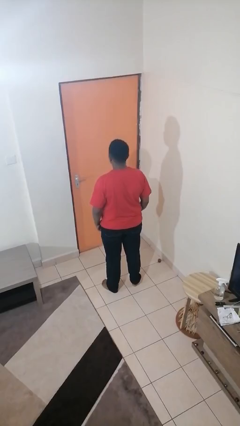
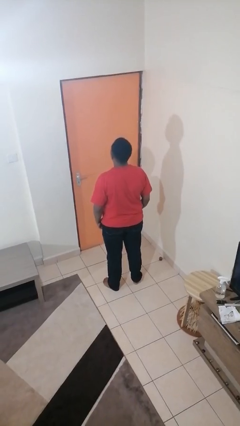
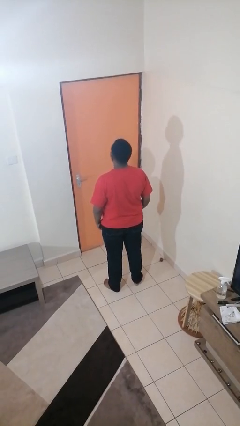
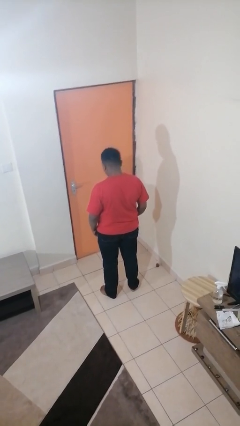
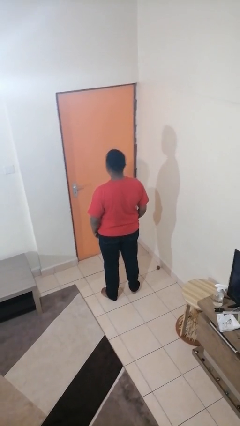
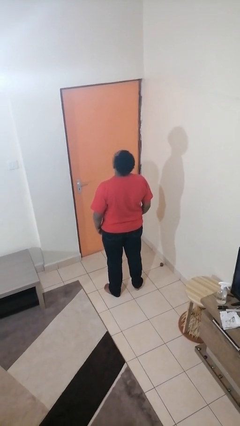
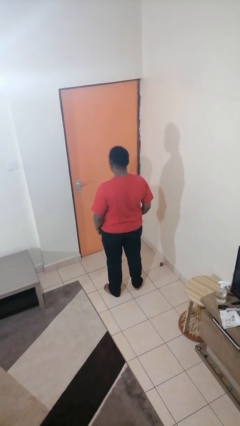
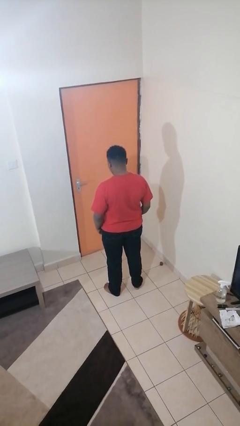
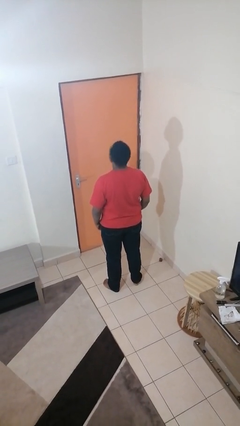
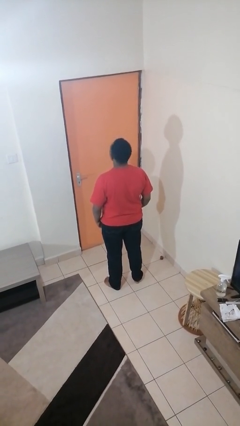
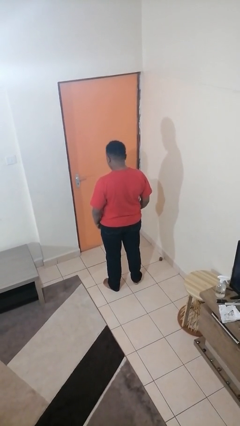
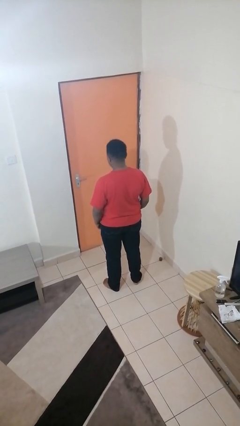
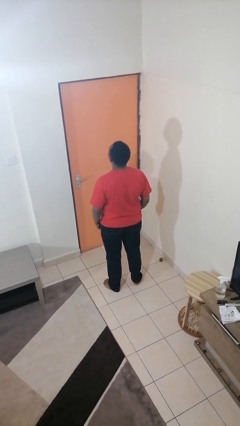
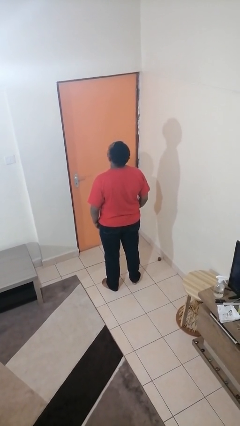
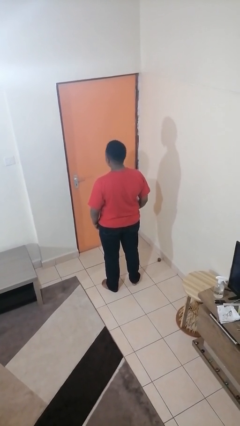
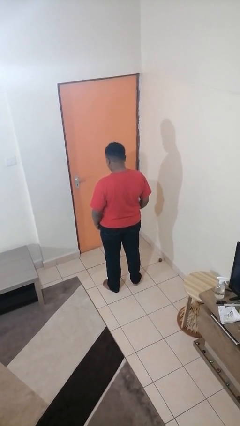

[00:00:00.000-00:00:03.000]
person nods head

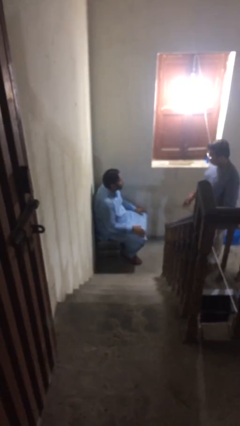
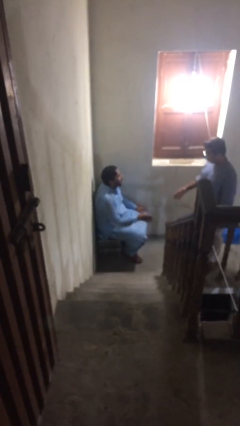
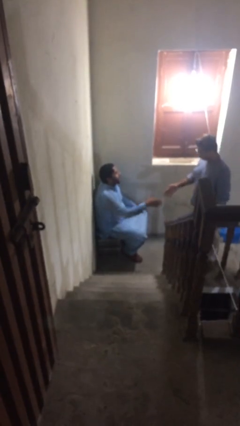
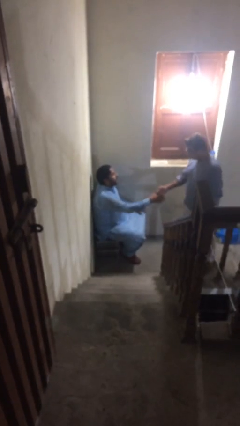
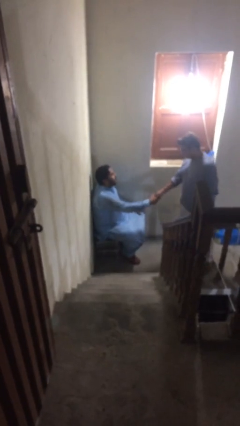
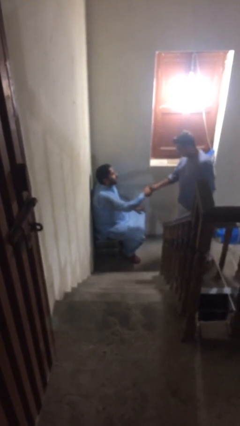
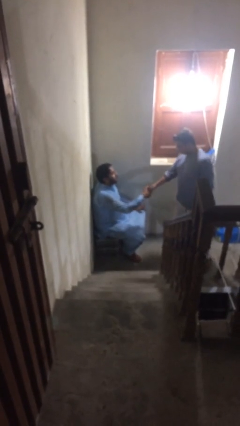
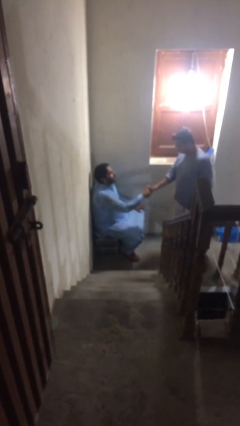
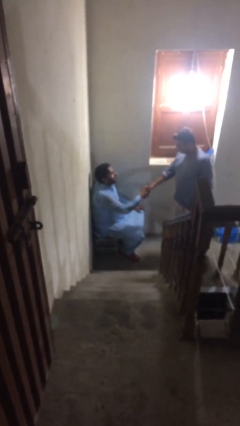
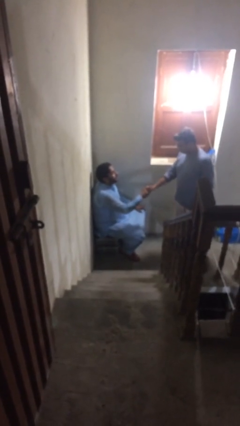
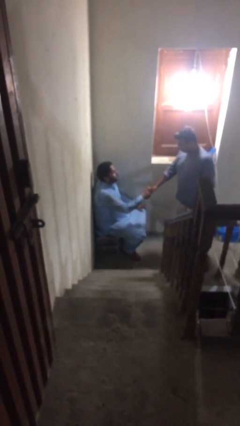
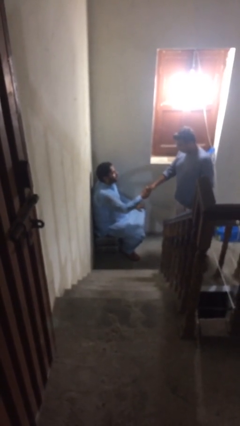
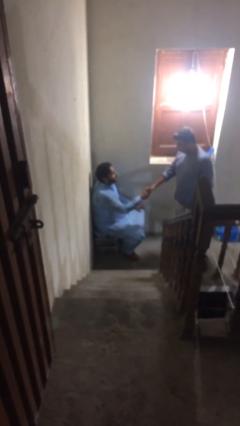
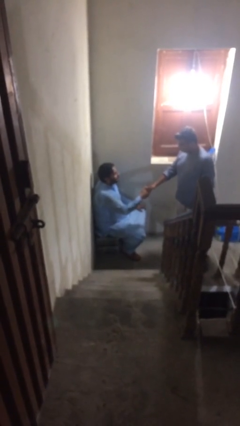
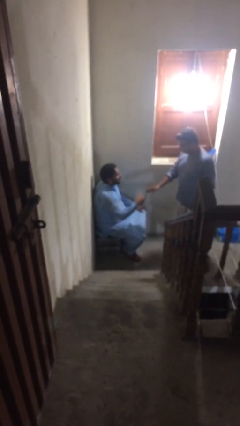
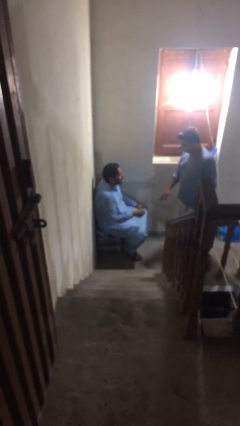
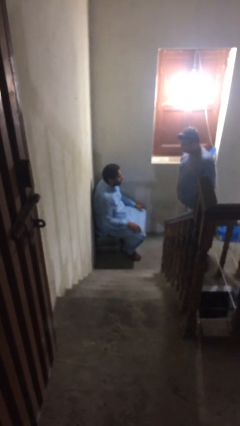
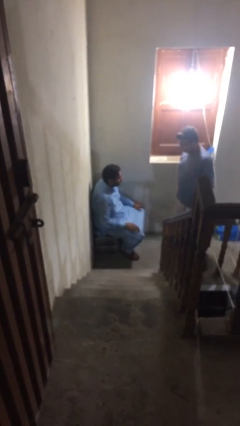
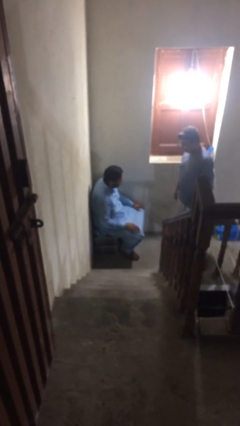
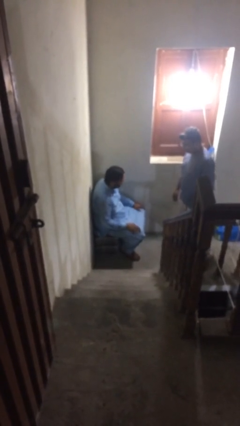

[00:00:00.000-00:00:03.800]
person shakes hand

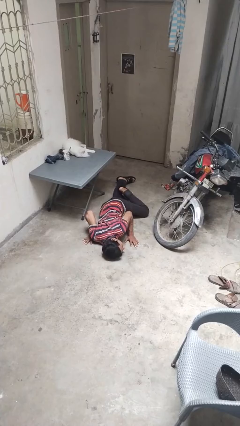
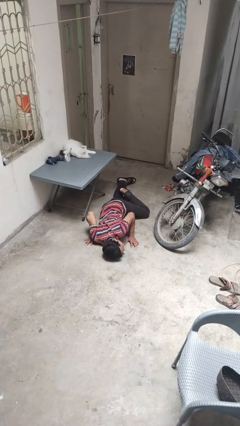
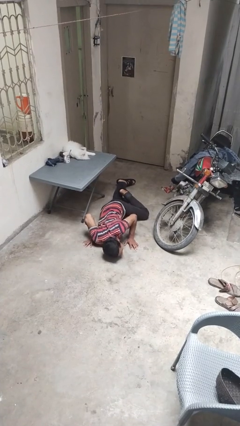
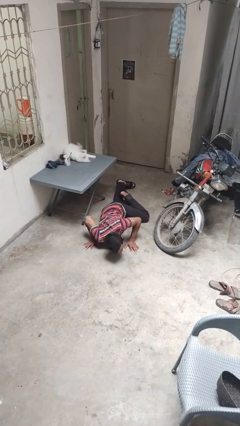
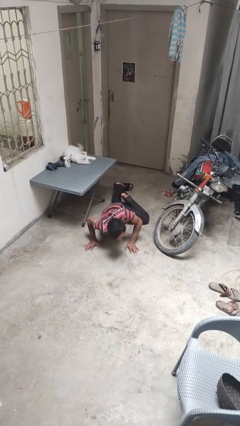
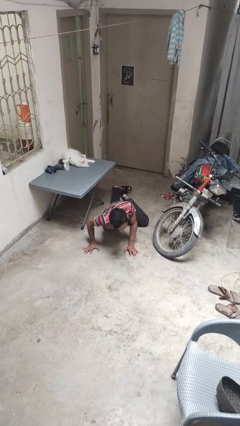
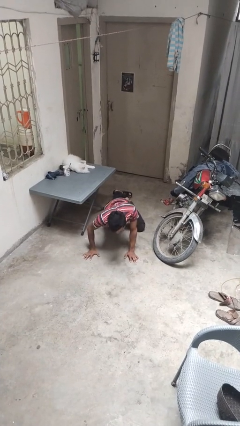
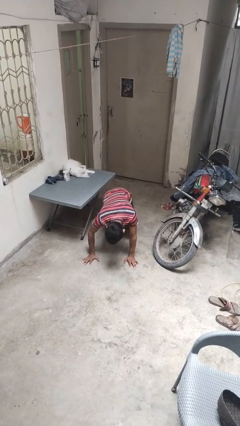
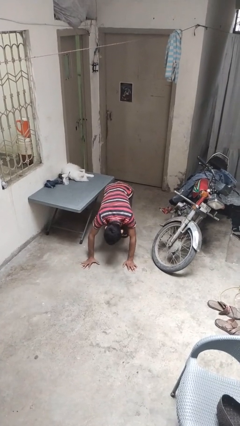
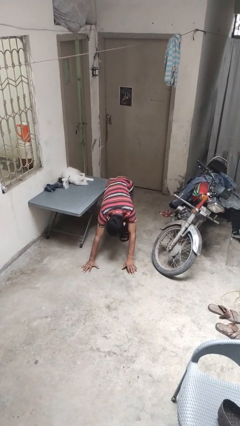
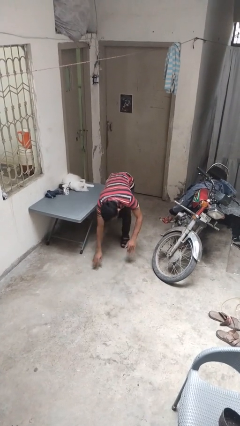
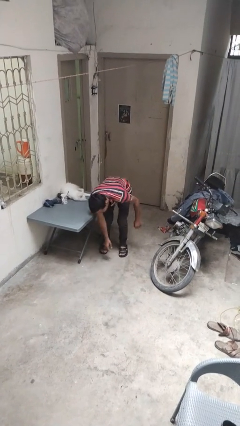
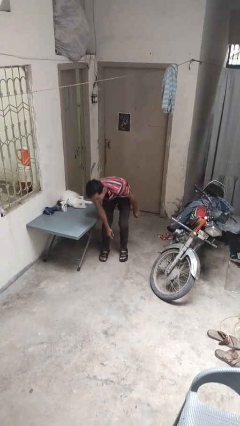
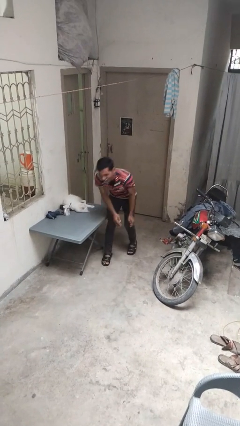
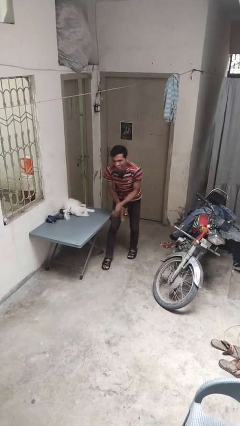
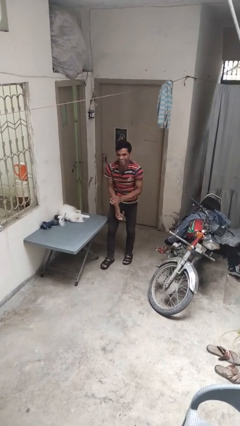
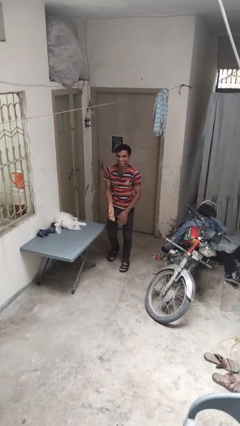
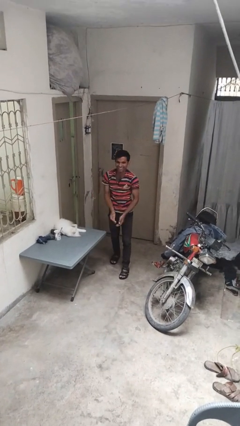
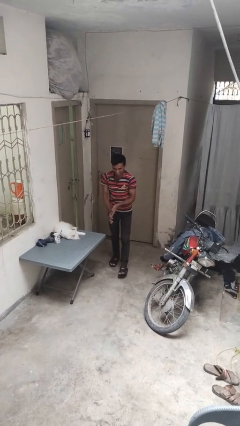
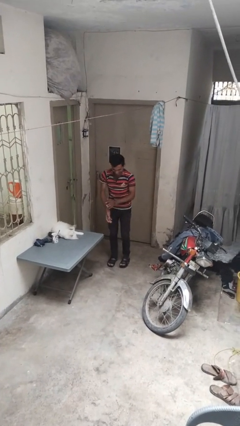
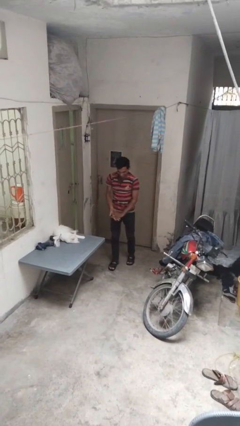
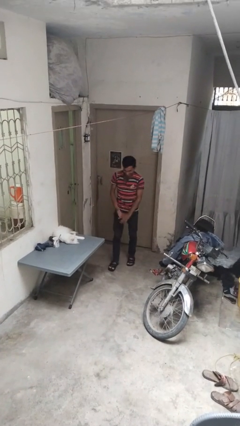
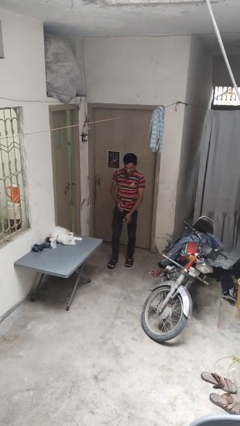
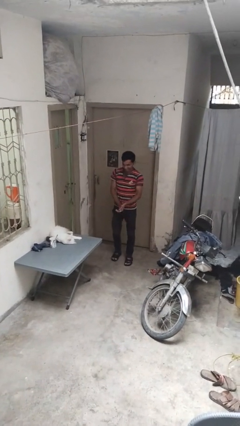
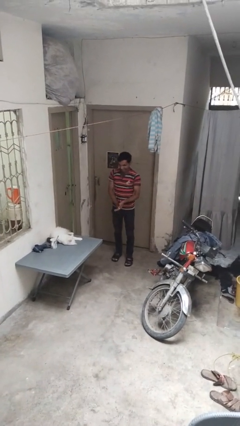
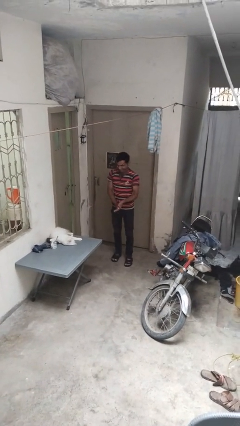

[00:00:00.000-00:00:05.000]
person stands up from floor

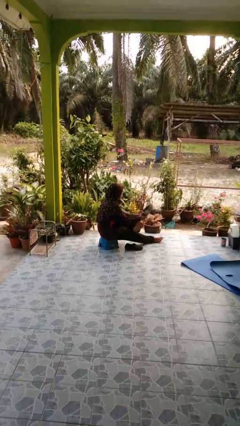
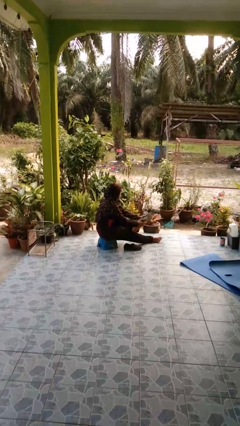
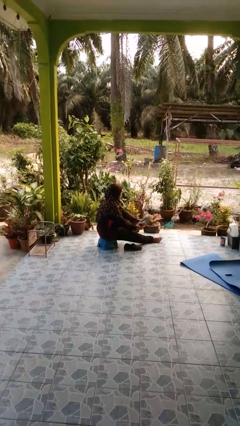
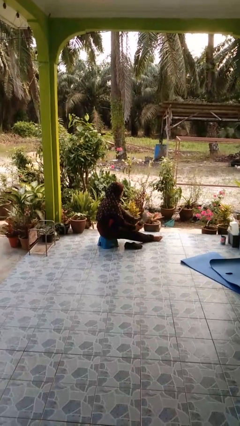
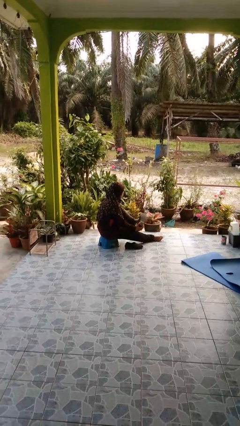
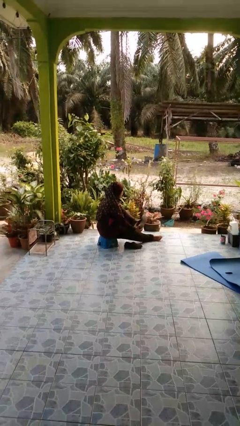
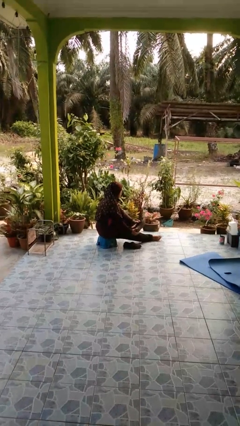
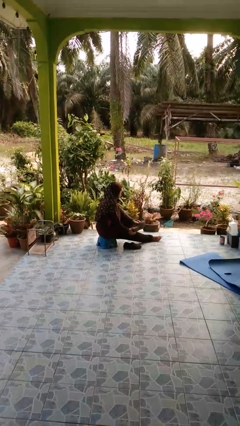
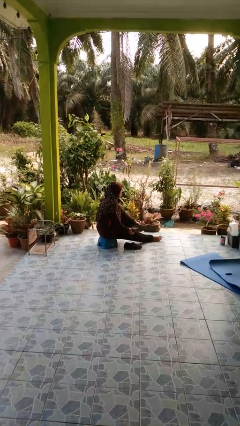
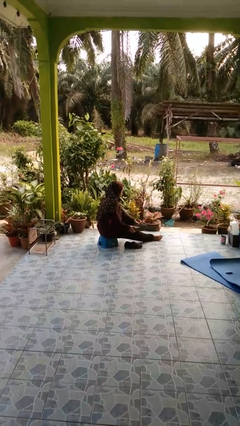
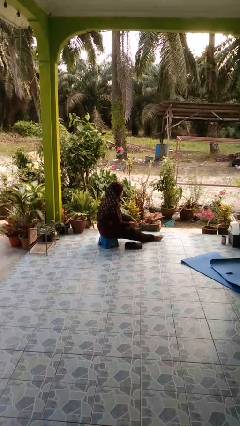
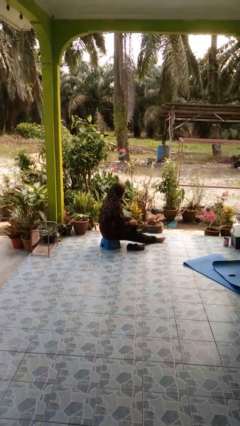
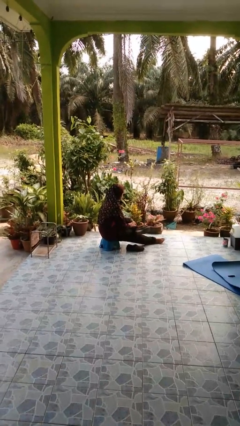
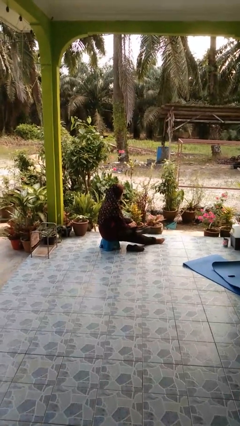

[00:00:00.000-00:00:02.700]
person puts on shoes

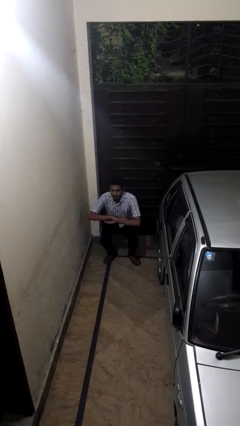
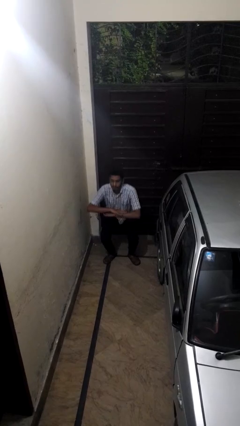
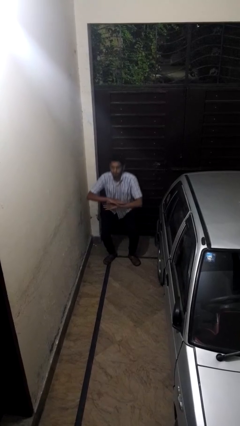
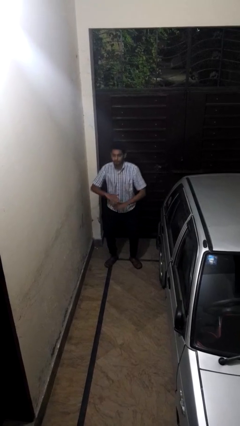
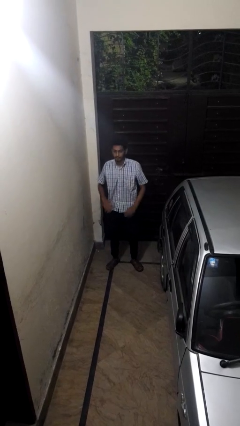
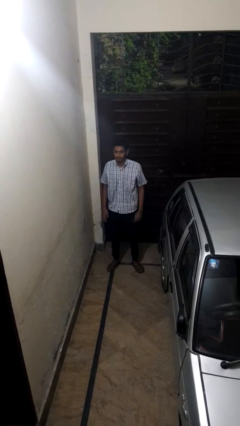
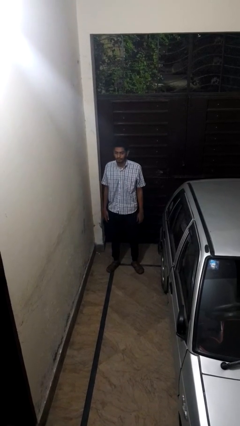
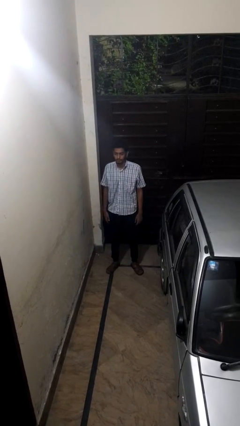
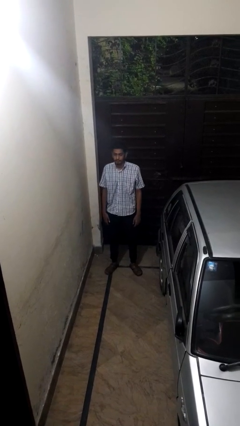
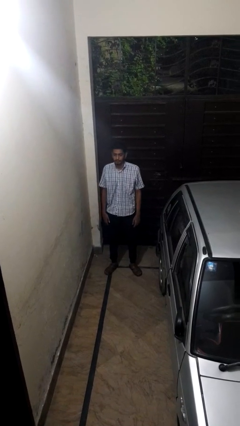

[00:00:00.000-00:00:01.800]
person stands up

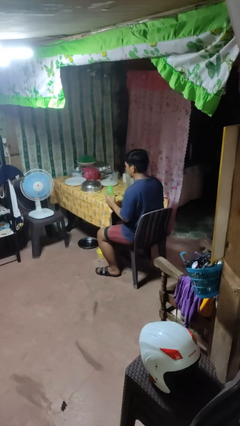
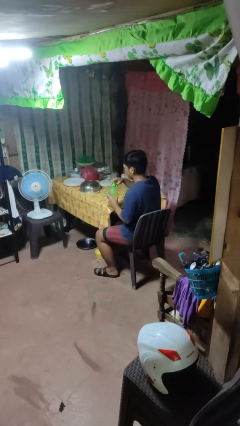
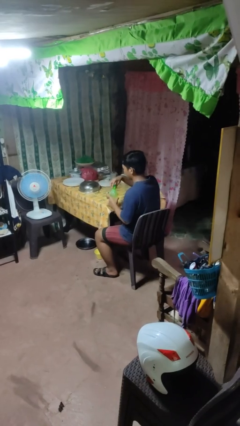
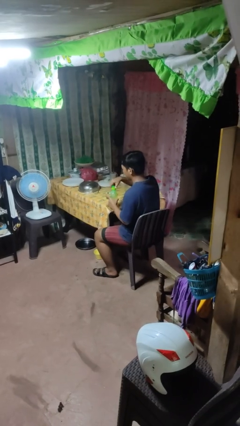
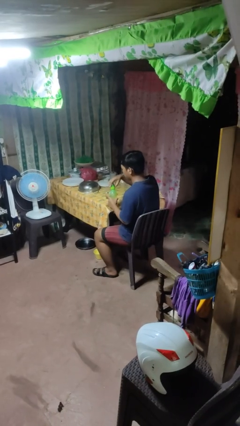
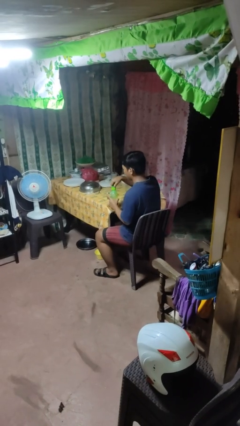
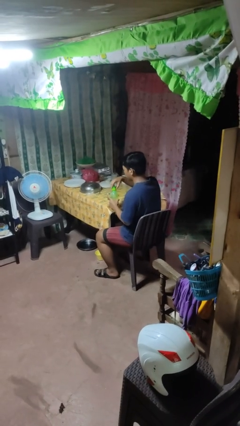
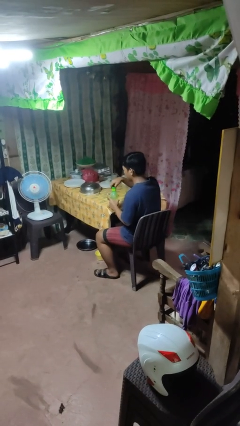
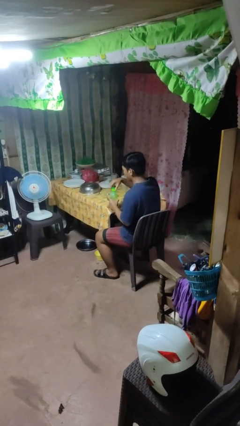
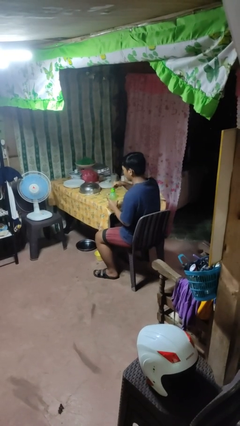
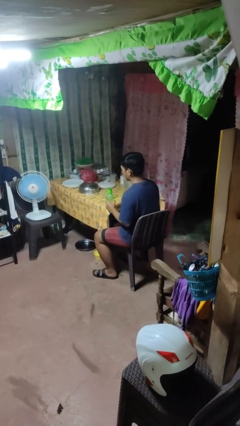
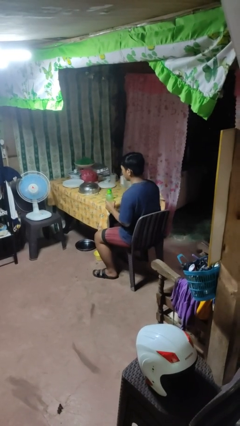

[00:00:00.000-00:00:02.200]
person screws lid to bottle
